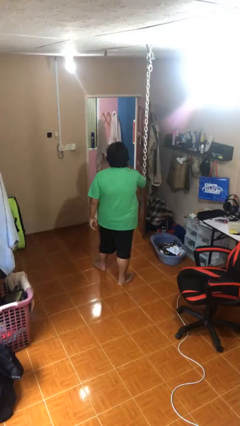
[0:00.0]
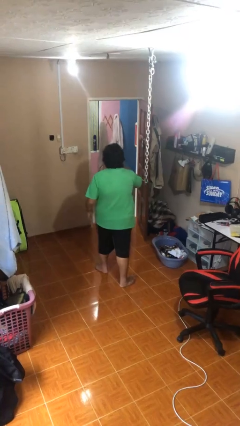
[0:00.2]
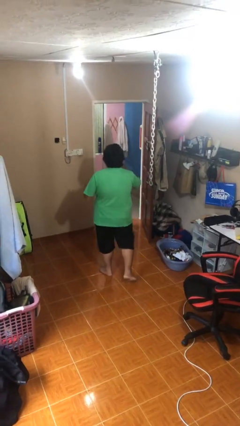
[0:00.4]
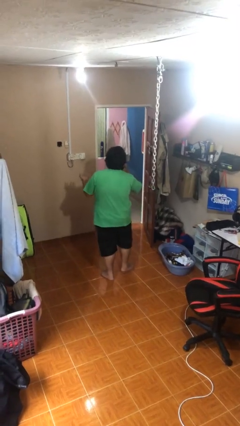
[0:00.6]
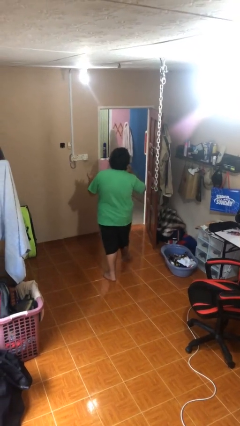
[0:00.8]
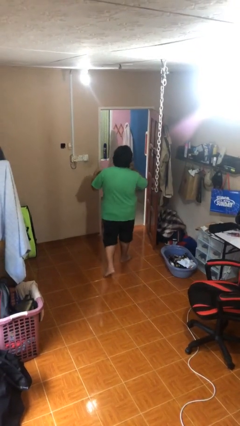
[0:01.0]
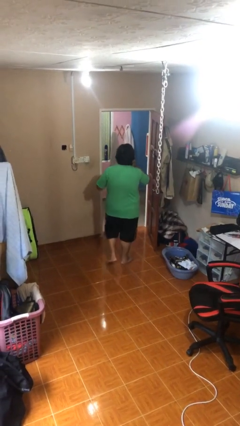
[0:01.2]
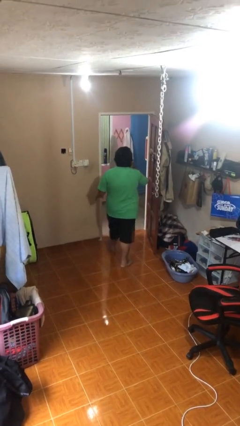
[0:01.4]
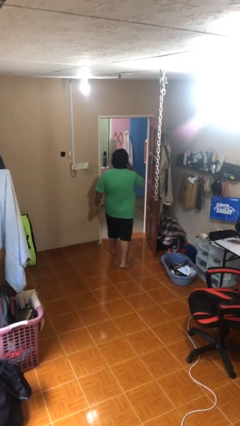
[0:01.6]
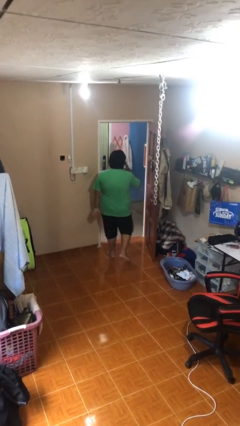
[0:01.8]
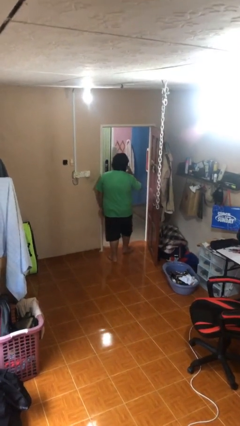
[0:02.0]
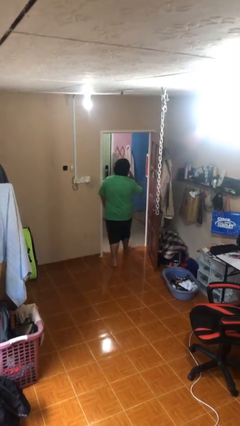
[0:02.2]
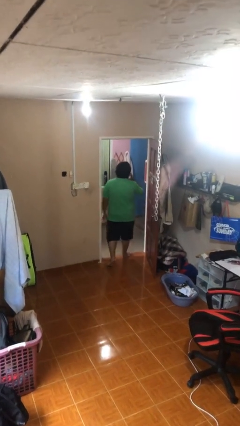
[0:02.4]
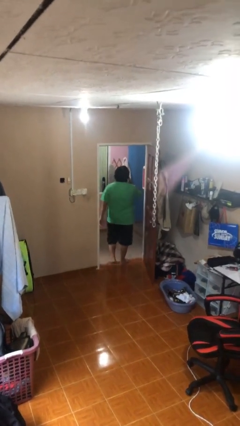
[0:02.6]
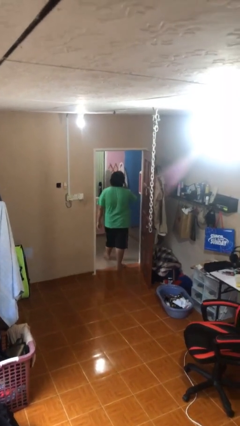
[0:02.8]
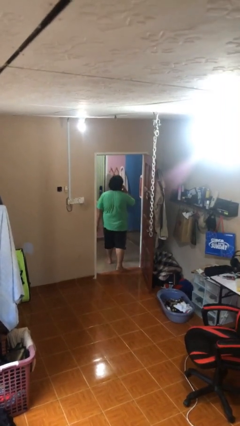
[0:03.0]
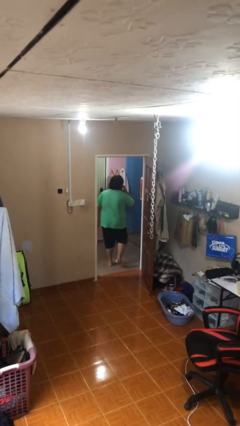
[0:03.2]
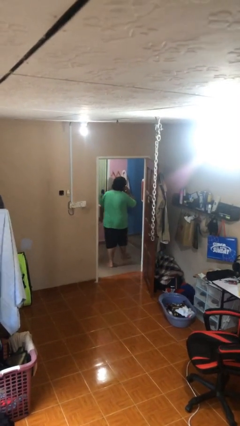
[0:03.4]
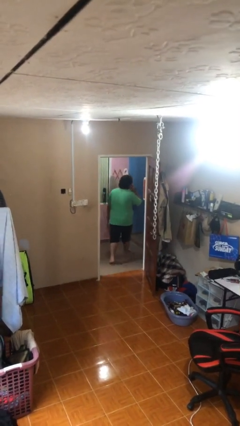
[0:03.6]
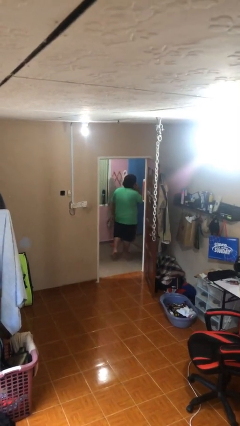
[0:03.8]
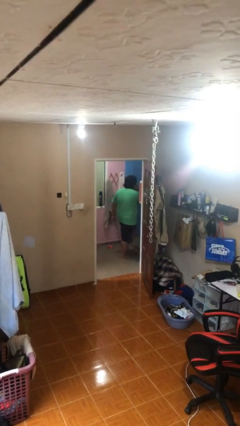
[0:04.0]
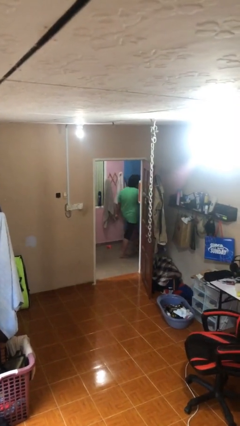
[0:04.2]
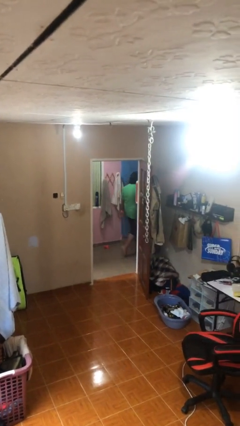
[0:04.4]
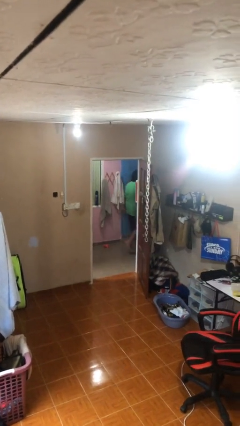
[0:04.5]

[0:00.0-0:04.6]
person exits scene through structure

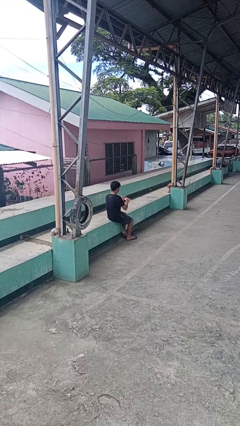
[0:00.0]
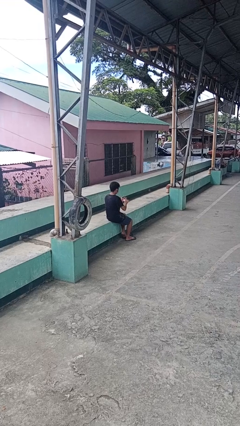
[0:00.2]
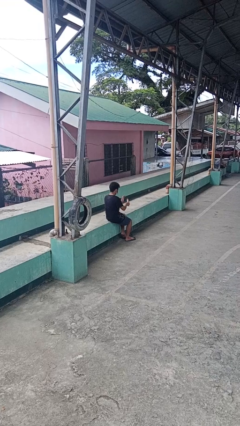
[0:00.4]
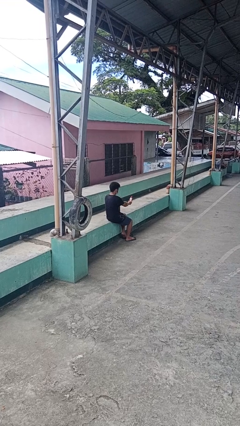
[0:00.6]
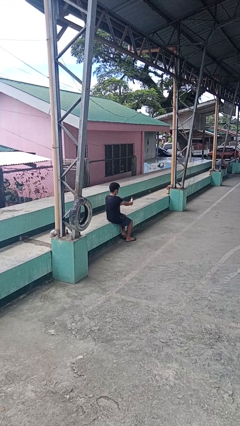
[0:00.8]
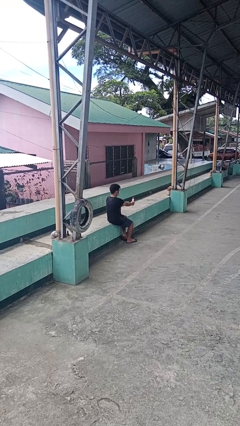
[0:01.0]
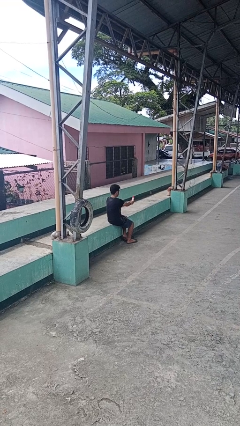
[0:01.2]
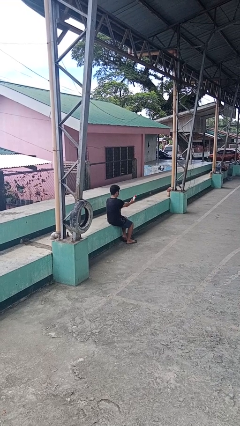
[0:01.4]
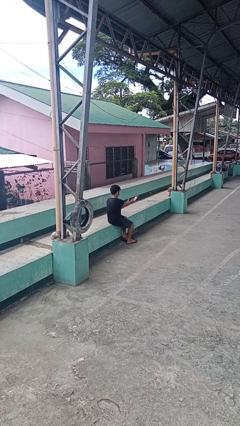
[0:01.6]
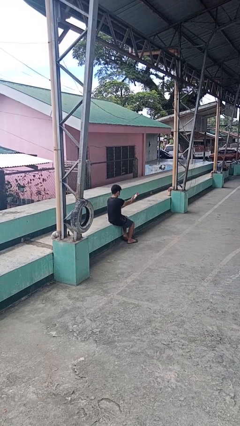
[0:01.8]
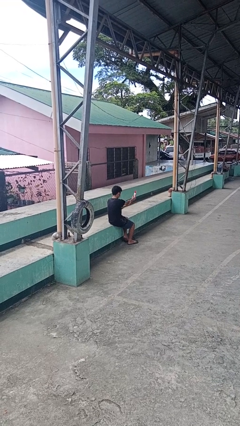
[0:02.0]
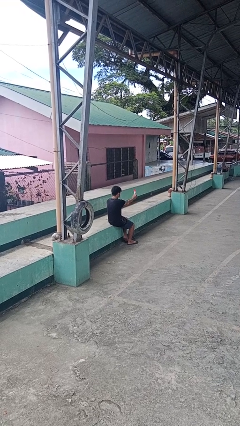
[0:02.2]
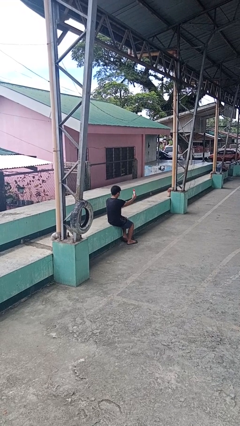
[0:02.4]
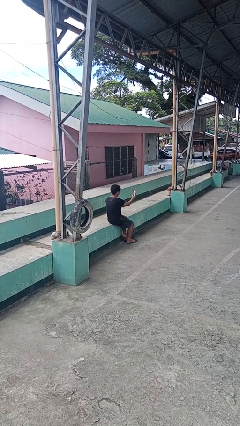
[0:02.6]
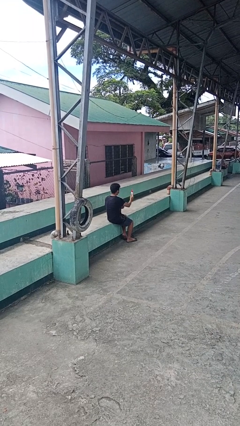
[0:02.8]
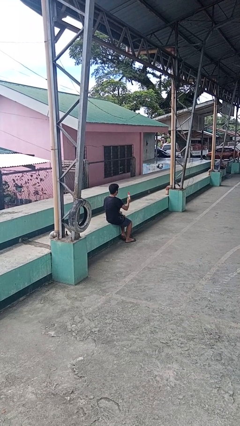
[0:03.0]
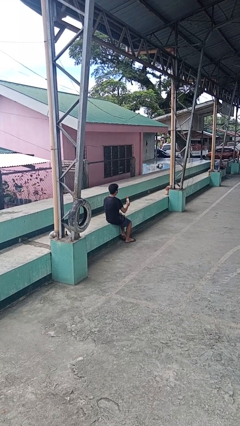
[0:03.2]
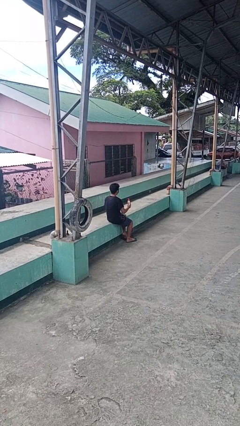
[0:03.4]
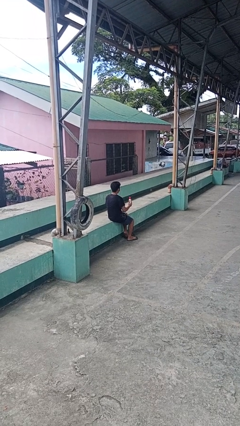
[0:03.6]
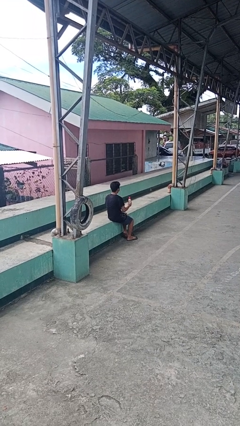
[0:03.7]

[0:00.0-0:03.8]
person applies sunscreen

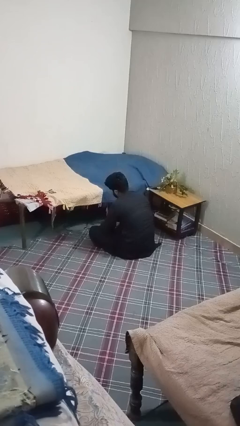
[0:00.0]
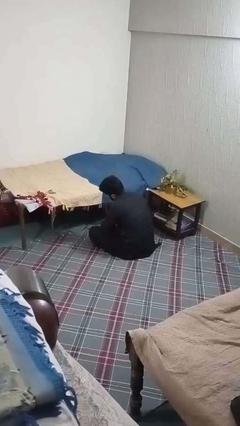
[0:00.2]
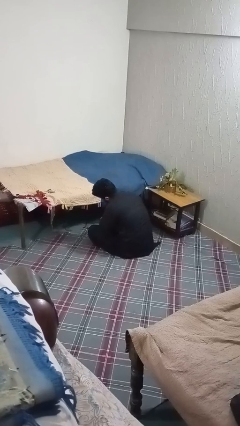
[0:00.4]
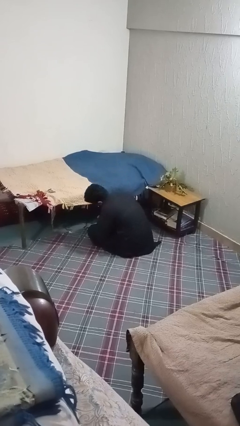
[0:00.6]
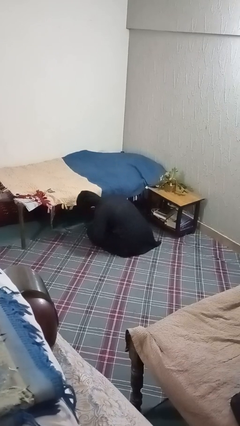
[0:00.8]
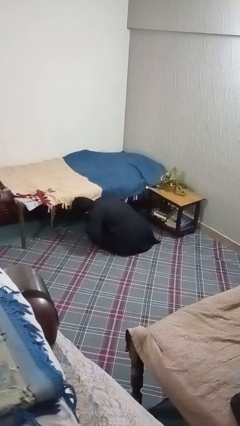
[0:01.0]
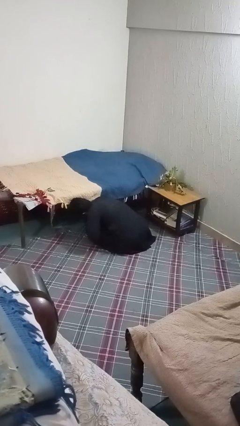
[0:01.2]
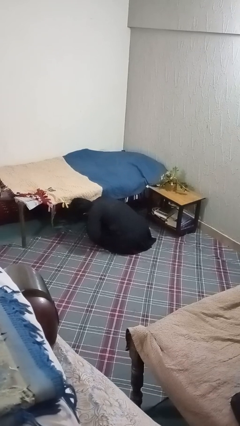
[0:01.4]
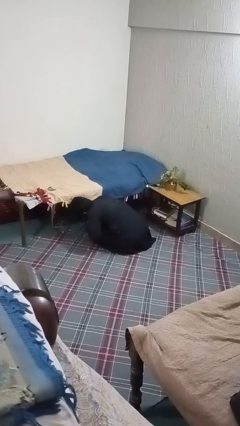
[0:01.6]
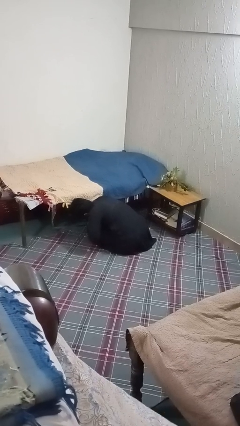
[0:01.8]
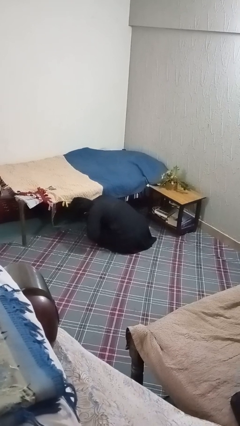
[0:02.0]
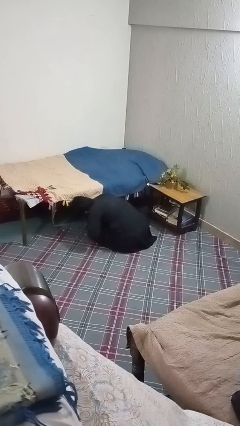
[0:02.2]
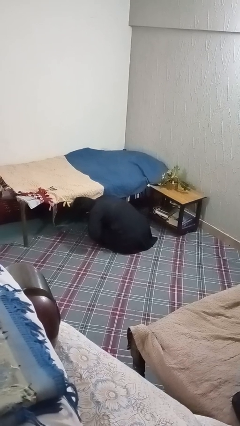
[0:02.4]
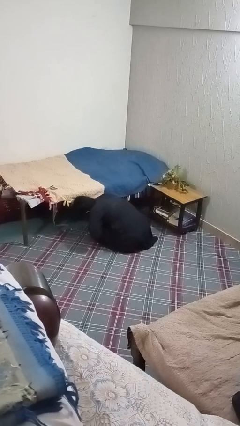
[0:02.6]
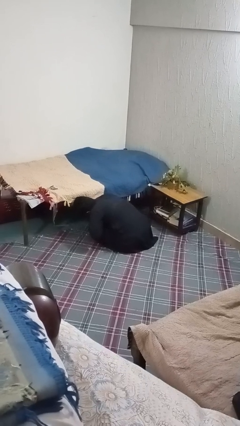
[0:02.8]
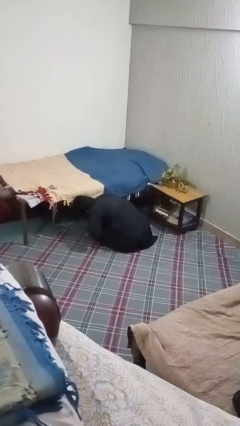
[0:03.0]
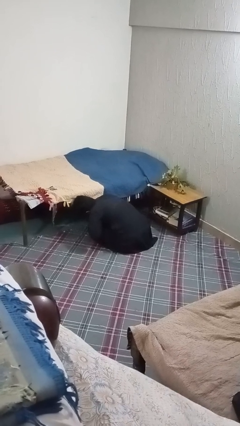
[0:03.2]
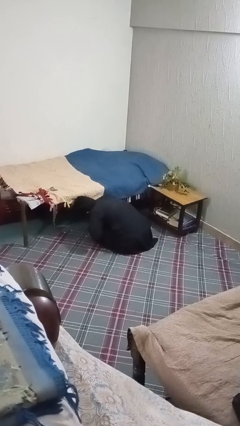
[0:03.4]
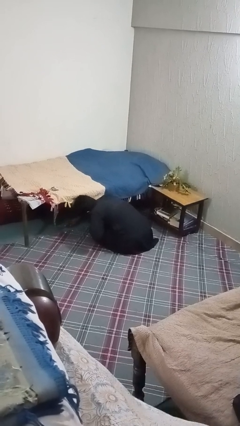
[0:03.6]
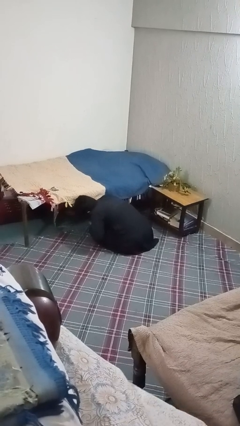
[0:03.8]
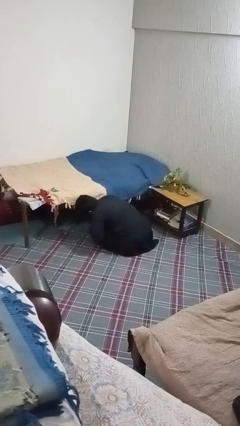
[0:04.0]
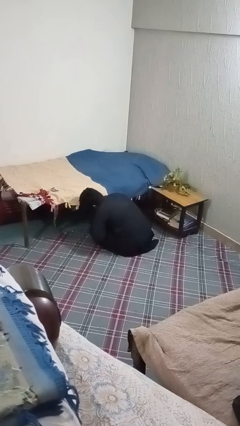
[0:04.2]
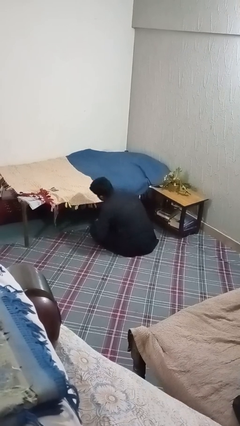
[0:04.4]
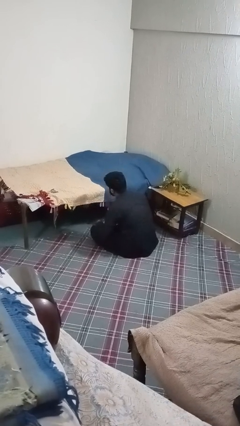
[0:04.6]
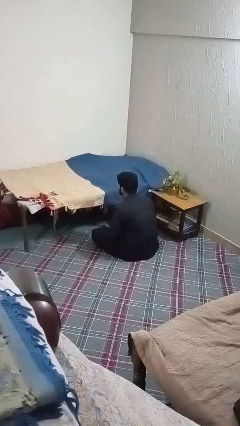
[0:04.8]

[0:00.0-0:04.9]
person searches under bed

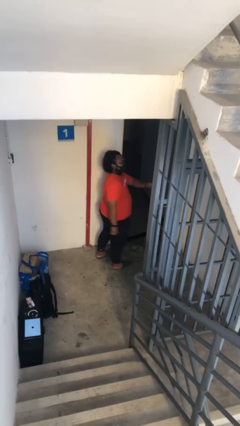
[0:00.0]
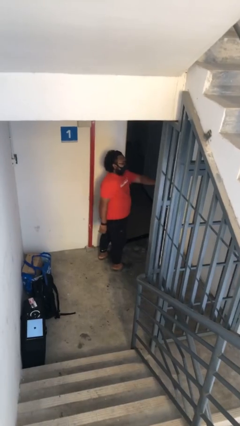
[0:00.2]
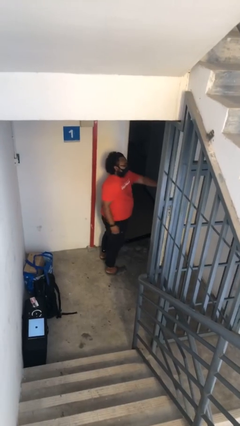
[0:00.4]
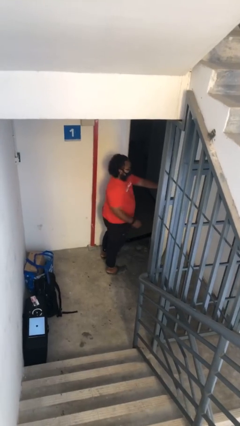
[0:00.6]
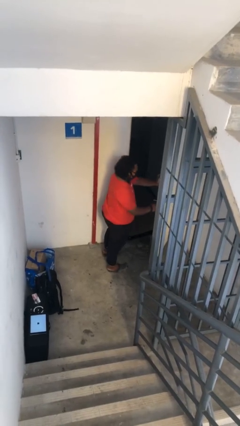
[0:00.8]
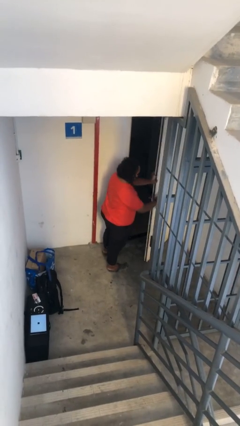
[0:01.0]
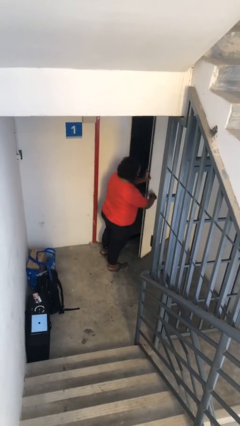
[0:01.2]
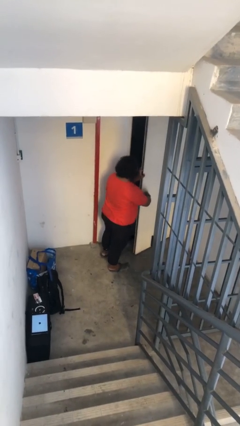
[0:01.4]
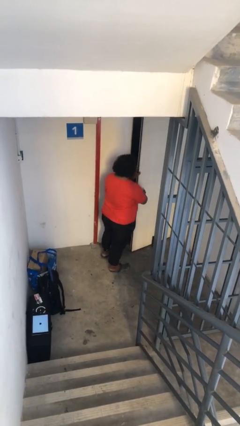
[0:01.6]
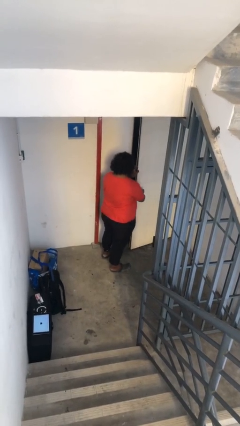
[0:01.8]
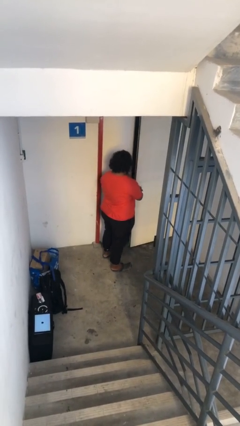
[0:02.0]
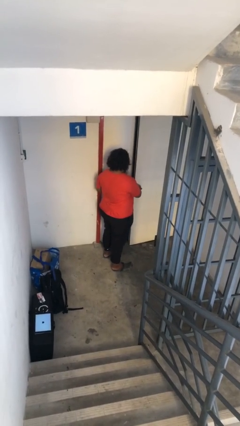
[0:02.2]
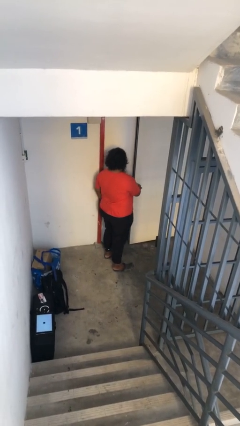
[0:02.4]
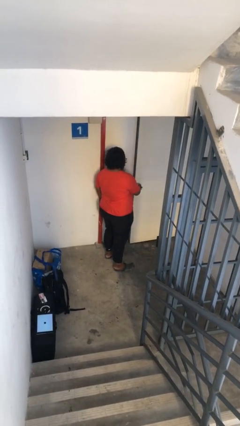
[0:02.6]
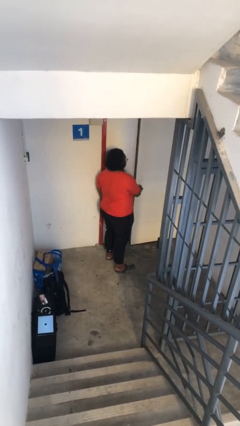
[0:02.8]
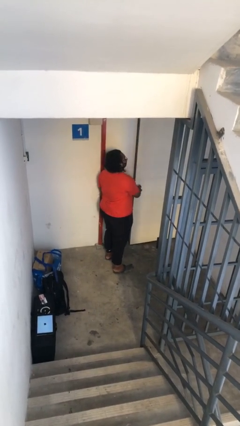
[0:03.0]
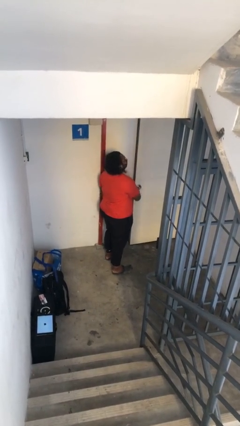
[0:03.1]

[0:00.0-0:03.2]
person closes facility door

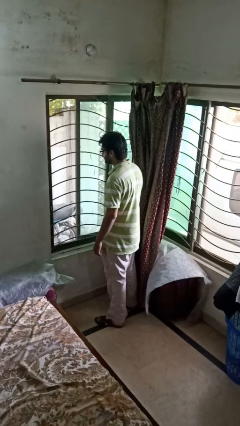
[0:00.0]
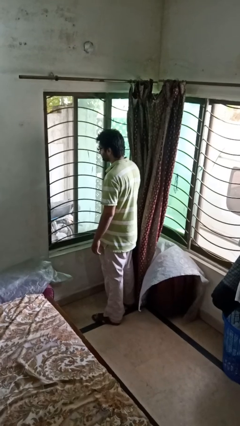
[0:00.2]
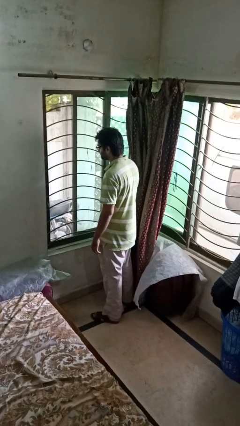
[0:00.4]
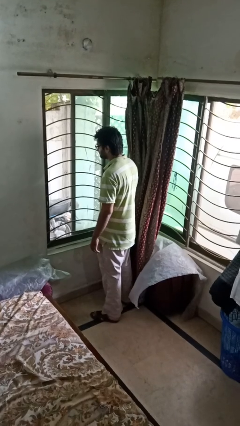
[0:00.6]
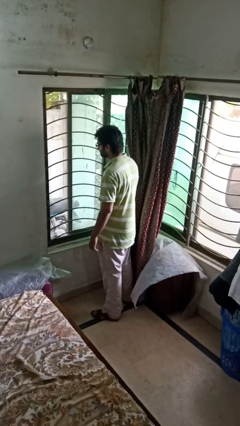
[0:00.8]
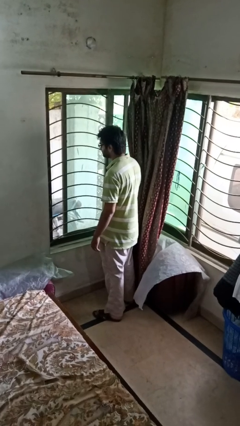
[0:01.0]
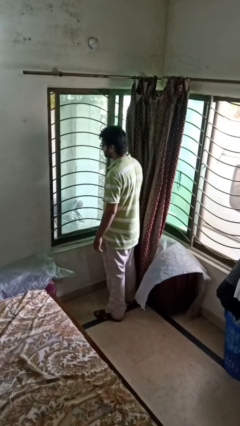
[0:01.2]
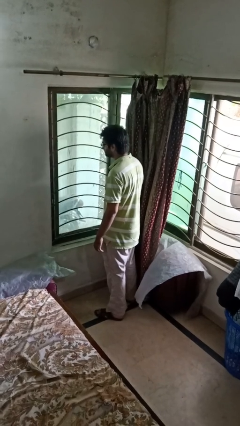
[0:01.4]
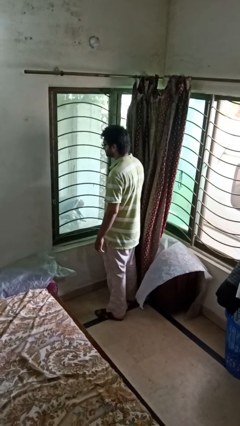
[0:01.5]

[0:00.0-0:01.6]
person closes home window
